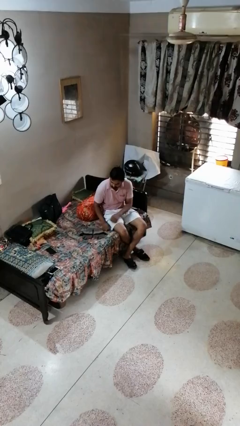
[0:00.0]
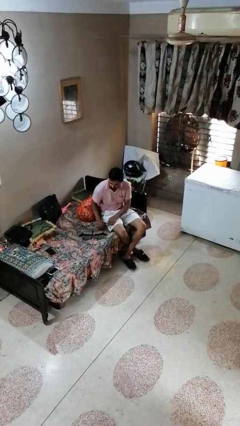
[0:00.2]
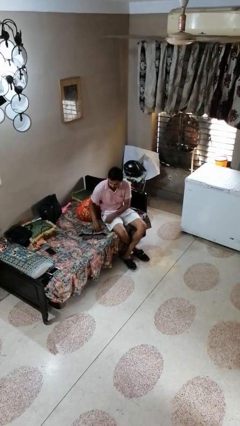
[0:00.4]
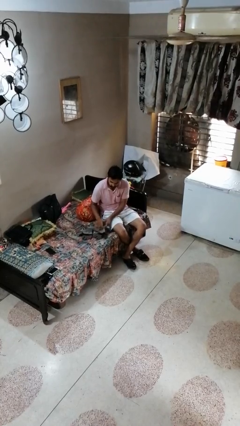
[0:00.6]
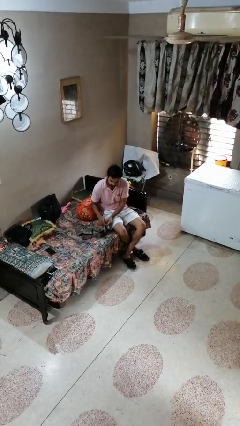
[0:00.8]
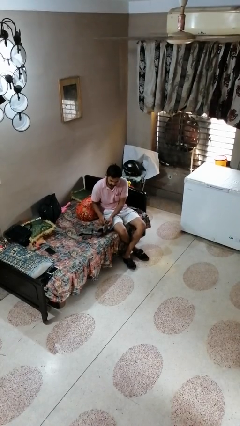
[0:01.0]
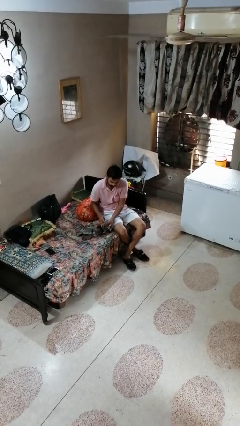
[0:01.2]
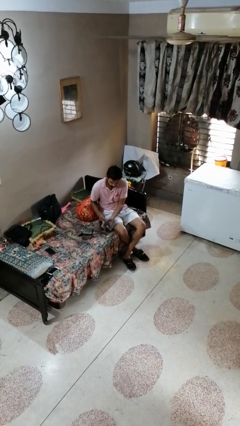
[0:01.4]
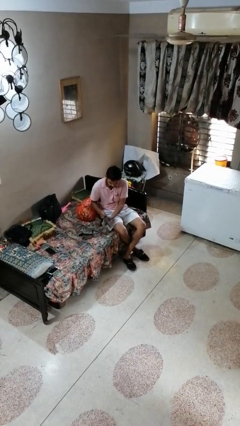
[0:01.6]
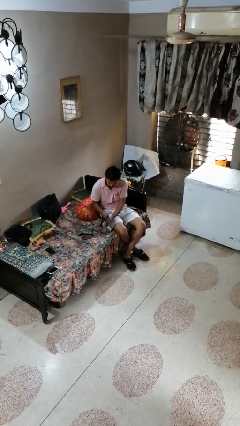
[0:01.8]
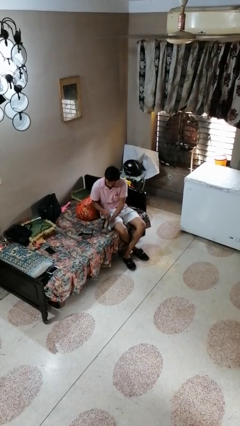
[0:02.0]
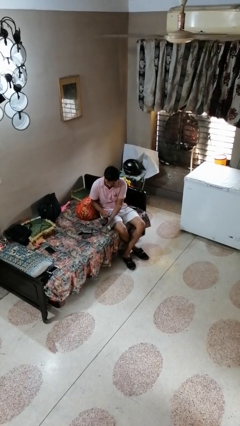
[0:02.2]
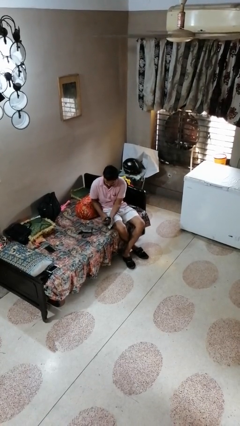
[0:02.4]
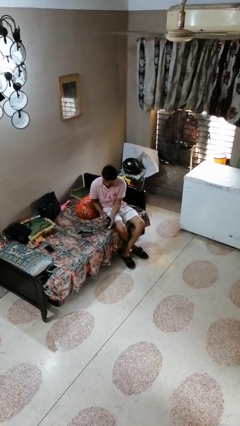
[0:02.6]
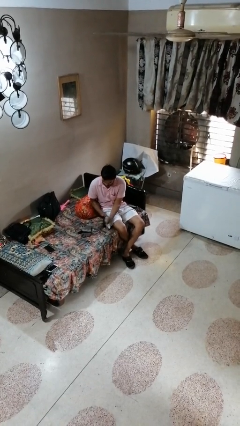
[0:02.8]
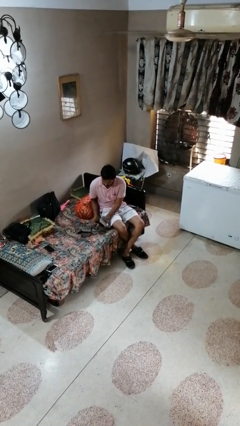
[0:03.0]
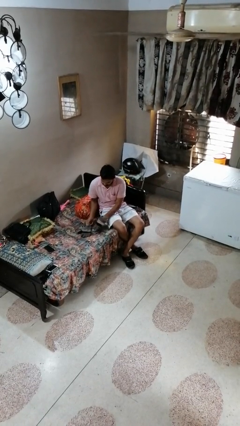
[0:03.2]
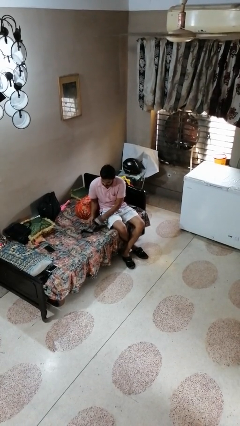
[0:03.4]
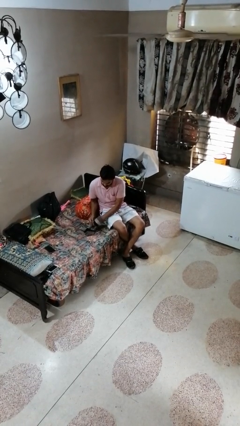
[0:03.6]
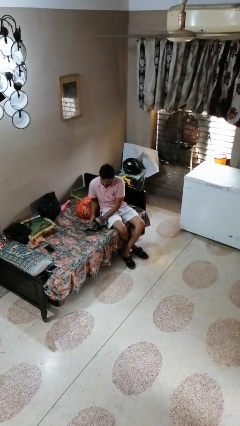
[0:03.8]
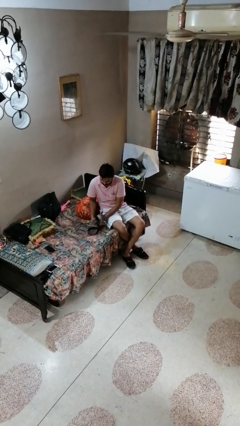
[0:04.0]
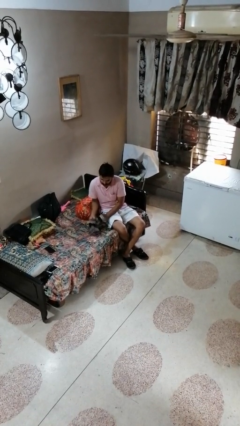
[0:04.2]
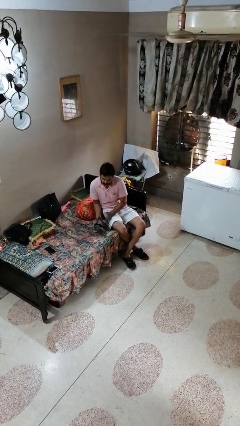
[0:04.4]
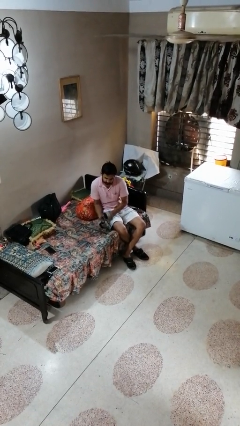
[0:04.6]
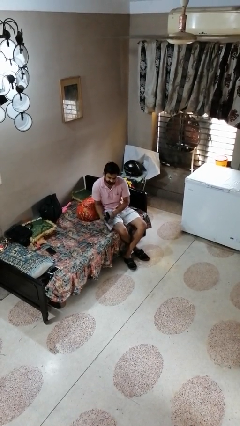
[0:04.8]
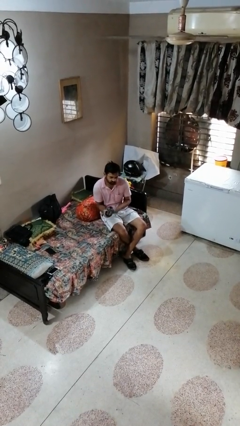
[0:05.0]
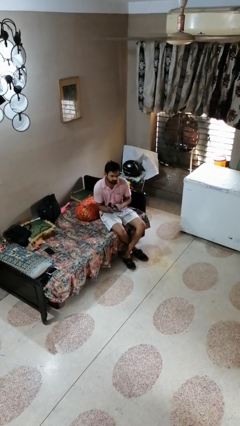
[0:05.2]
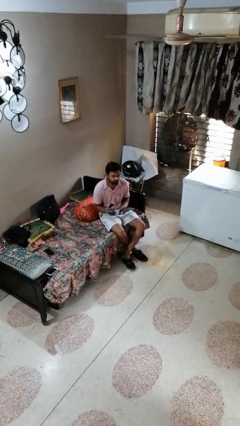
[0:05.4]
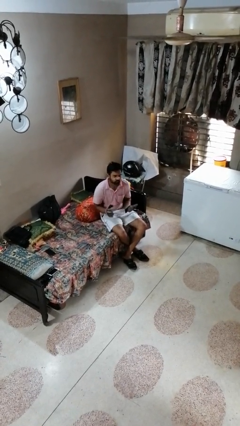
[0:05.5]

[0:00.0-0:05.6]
person puts on gloves

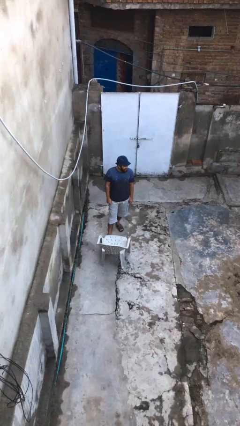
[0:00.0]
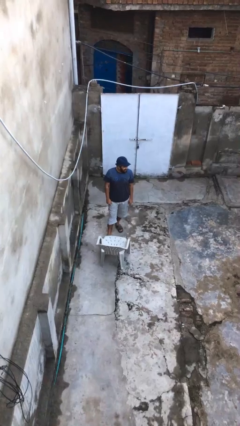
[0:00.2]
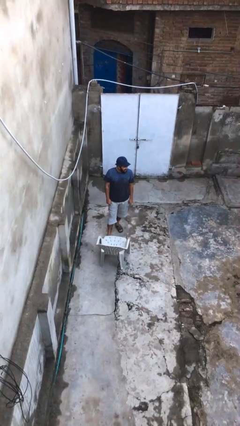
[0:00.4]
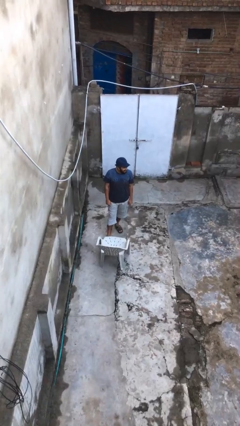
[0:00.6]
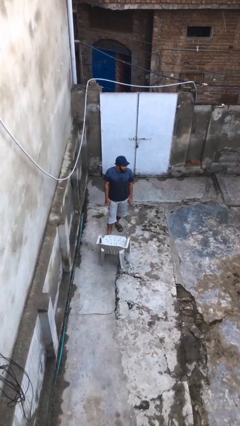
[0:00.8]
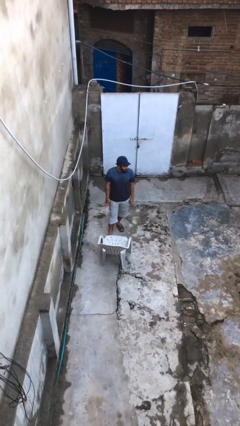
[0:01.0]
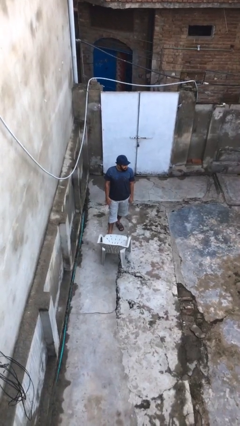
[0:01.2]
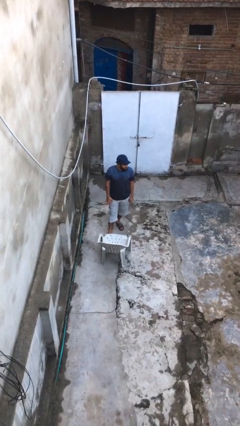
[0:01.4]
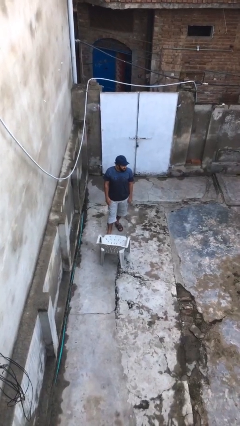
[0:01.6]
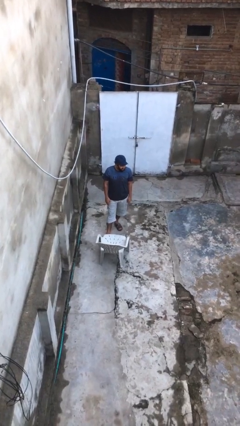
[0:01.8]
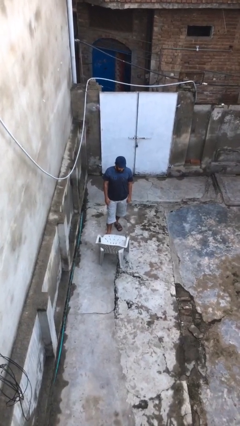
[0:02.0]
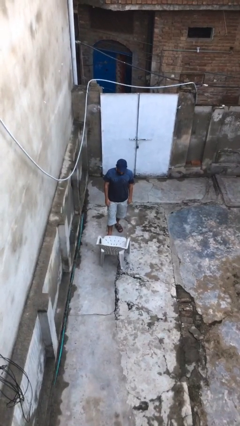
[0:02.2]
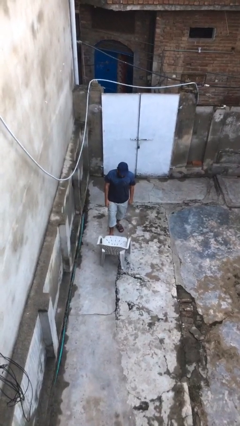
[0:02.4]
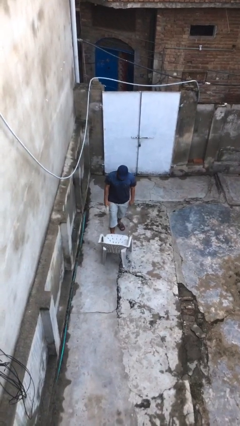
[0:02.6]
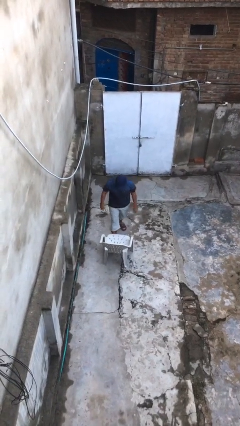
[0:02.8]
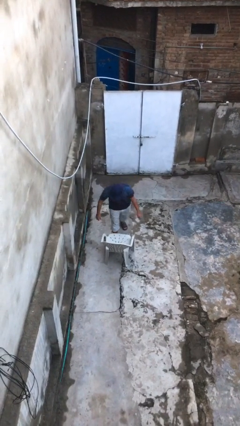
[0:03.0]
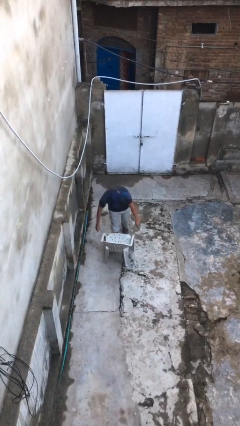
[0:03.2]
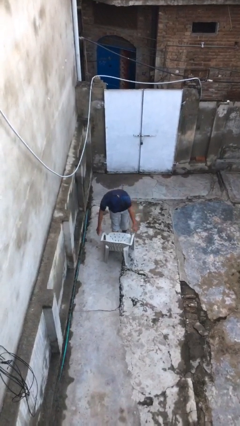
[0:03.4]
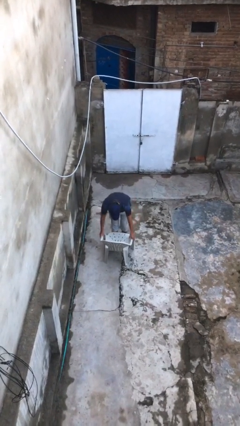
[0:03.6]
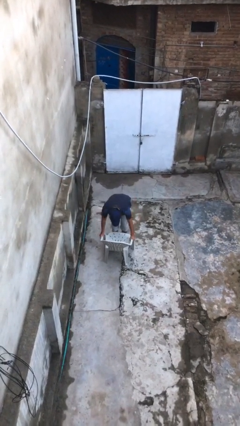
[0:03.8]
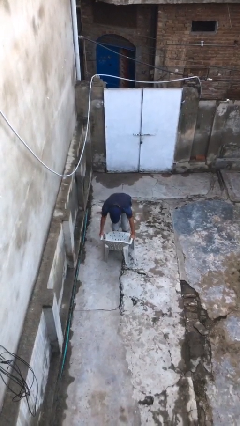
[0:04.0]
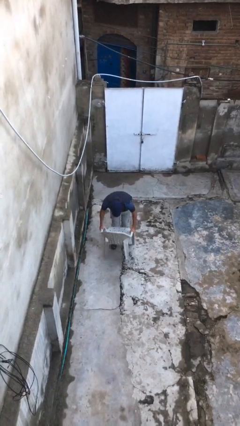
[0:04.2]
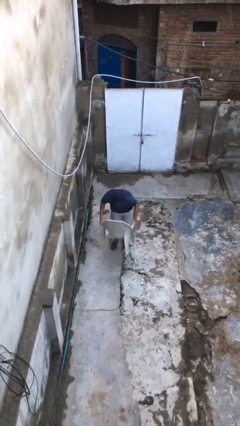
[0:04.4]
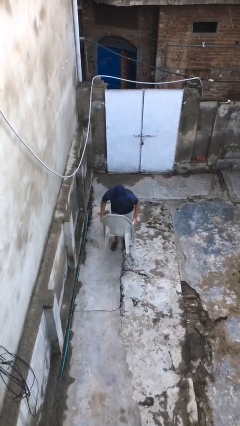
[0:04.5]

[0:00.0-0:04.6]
person picks up object from floor

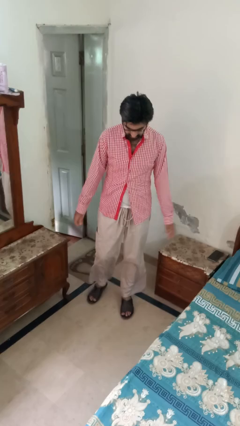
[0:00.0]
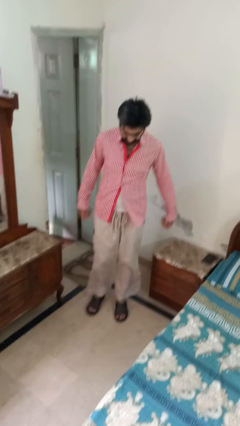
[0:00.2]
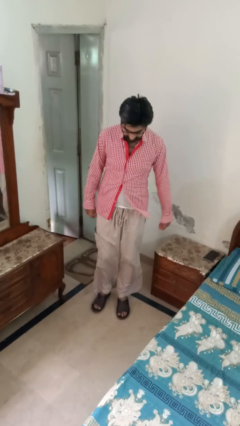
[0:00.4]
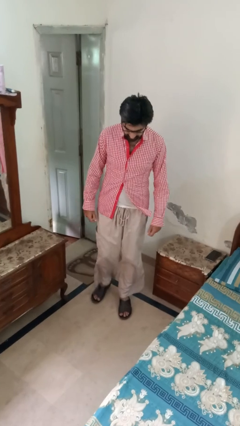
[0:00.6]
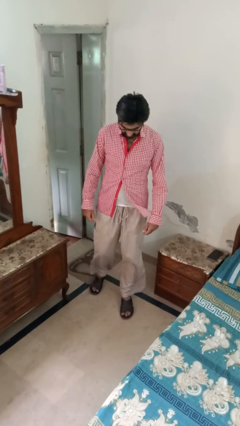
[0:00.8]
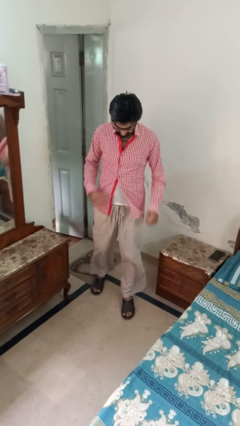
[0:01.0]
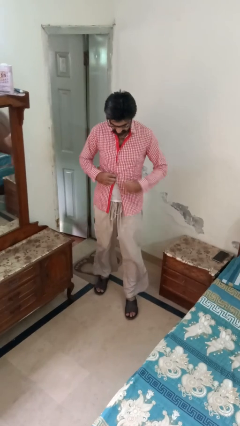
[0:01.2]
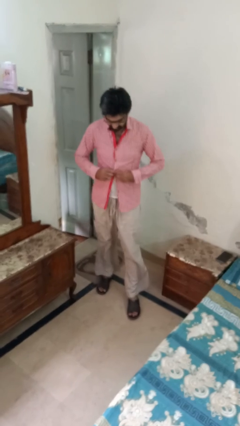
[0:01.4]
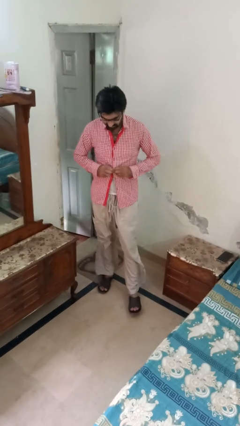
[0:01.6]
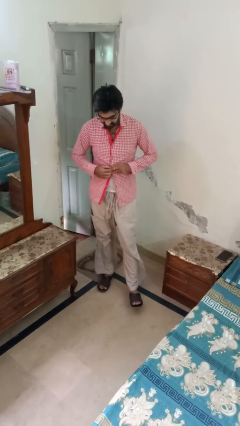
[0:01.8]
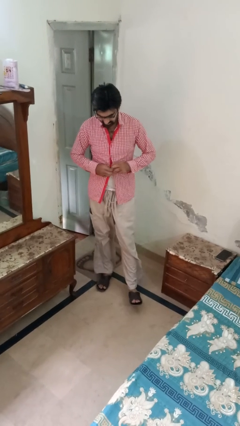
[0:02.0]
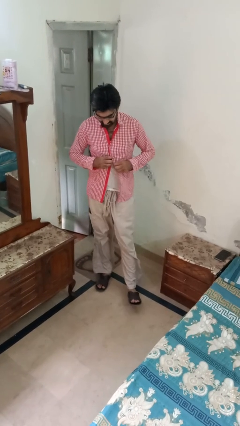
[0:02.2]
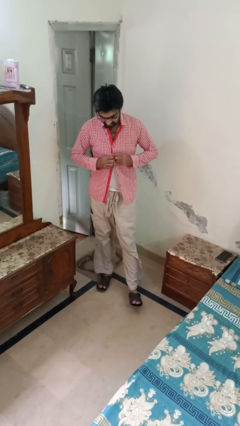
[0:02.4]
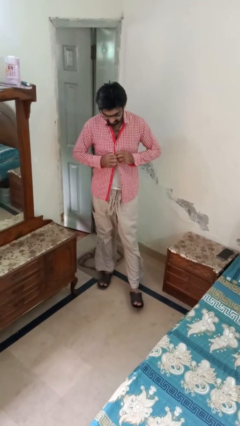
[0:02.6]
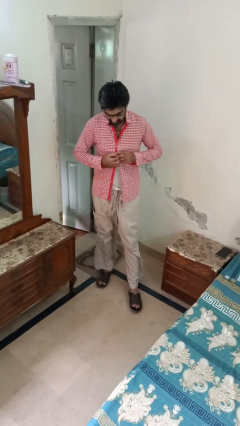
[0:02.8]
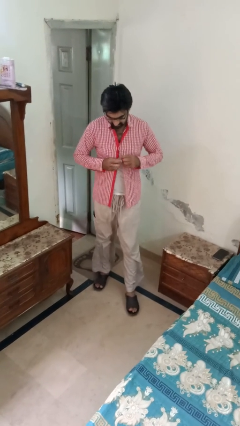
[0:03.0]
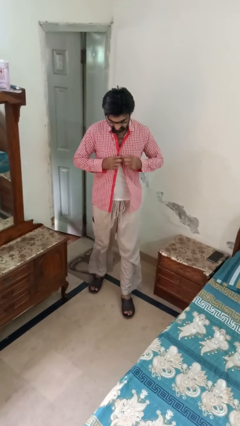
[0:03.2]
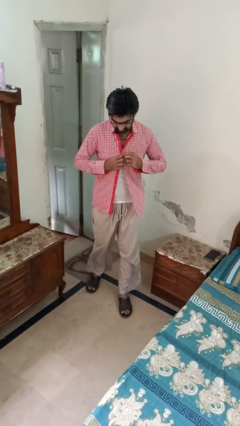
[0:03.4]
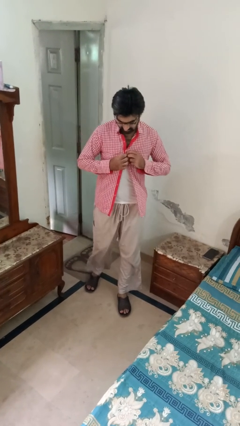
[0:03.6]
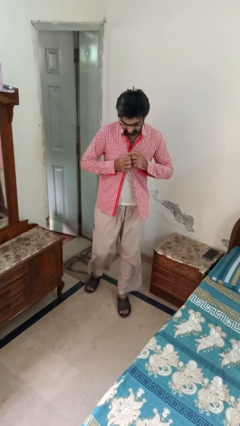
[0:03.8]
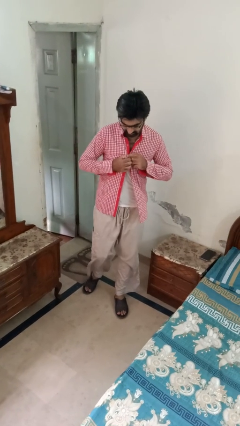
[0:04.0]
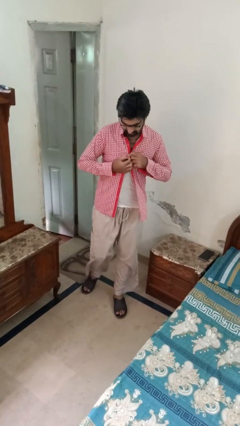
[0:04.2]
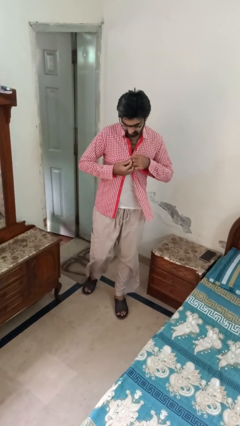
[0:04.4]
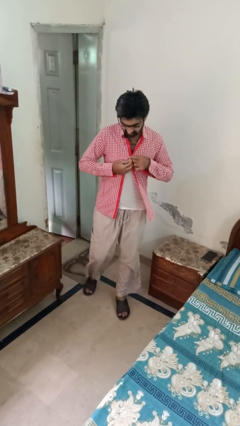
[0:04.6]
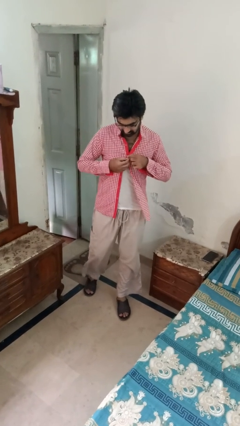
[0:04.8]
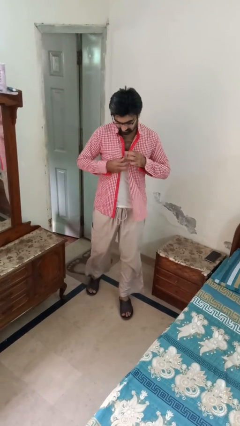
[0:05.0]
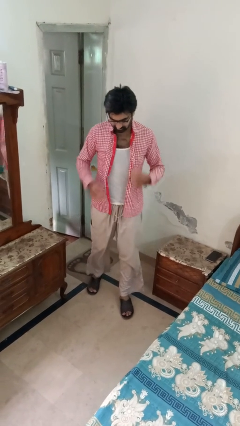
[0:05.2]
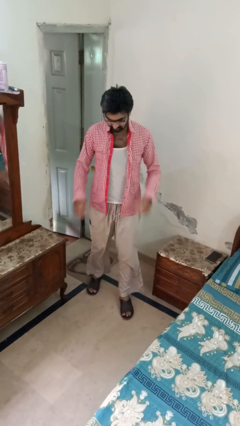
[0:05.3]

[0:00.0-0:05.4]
person unbuttons shirt

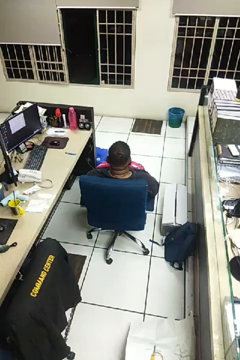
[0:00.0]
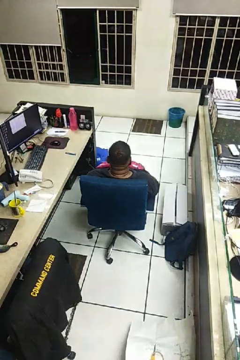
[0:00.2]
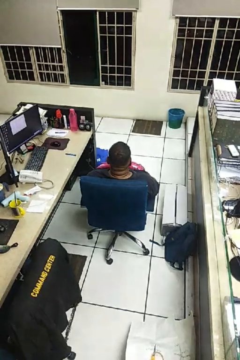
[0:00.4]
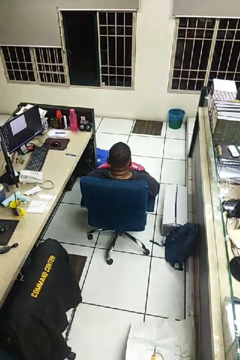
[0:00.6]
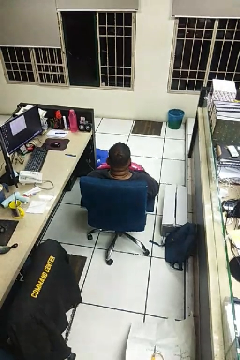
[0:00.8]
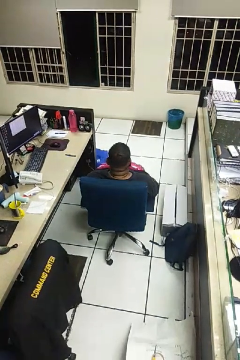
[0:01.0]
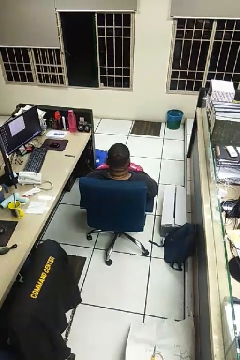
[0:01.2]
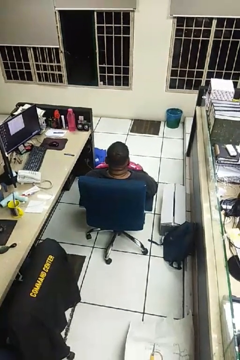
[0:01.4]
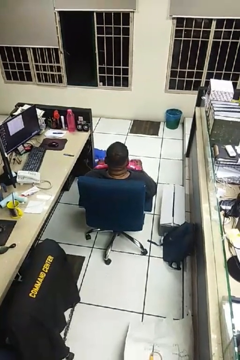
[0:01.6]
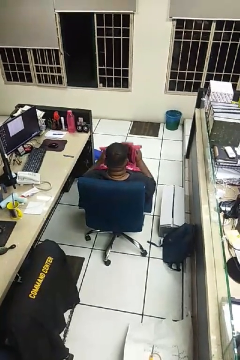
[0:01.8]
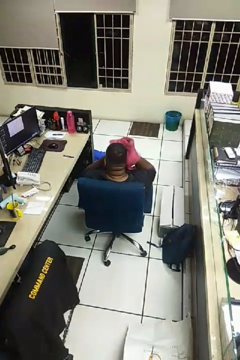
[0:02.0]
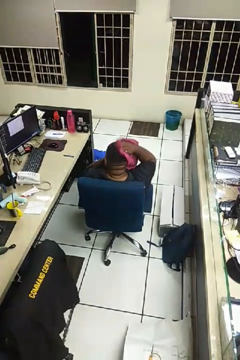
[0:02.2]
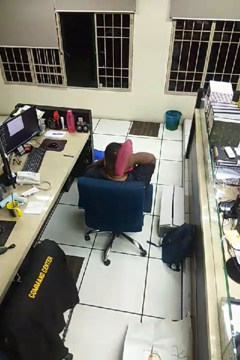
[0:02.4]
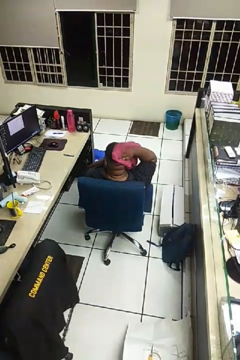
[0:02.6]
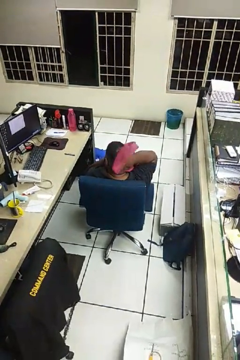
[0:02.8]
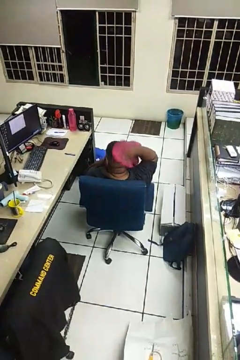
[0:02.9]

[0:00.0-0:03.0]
person dries hair with towel
